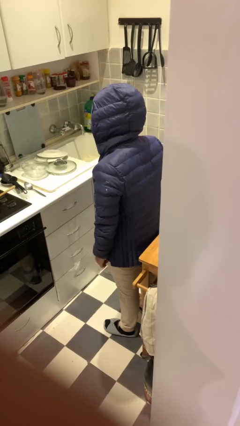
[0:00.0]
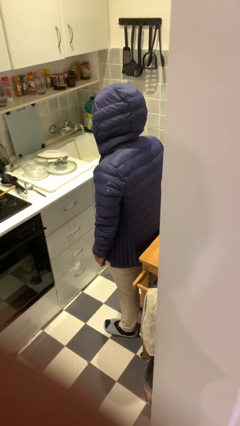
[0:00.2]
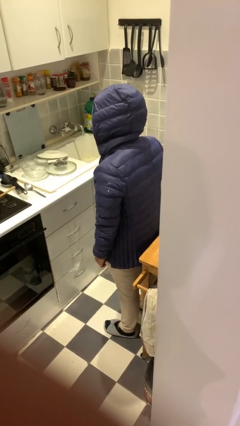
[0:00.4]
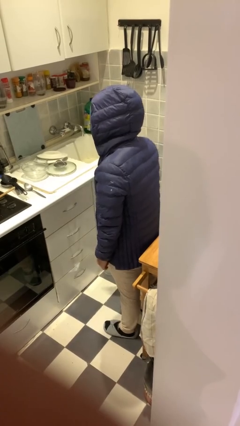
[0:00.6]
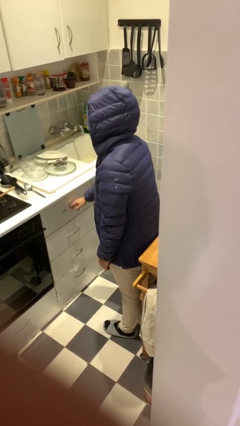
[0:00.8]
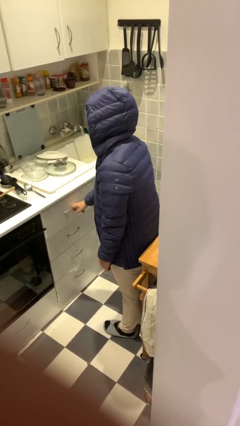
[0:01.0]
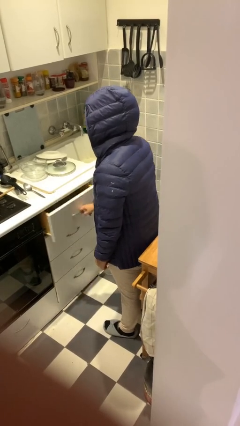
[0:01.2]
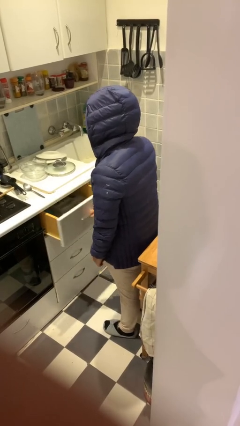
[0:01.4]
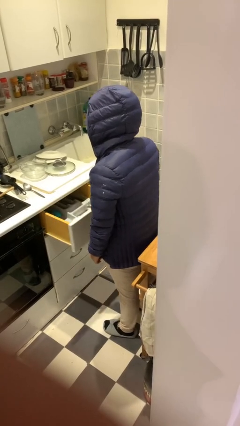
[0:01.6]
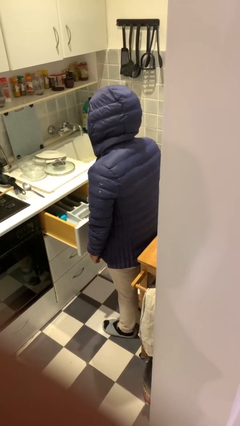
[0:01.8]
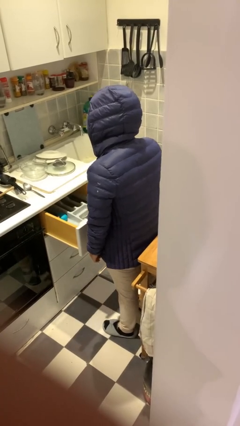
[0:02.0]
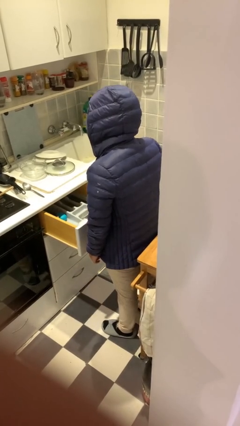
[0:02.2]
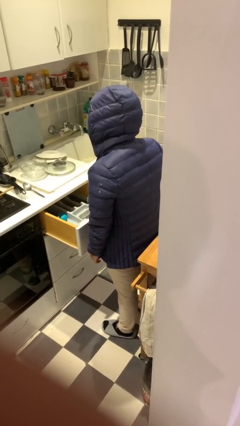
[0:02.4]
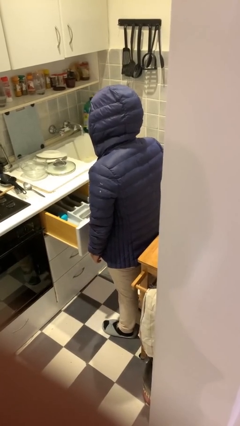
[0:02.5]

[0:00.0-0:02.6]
person opens kitchen drawer

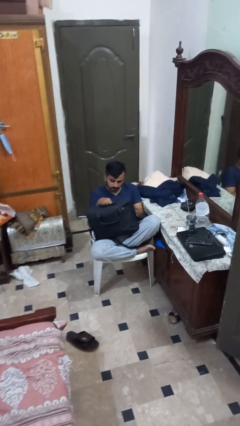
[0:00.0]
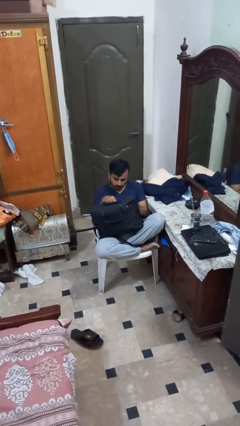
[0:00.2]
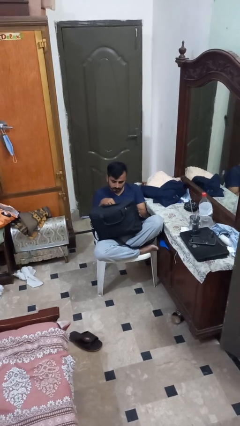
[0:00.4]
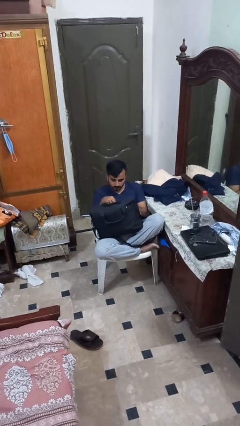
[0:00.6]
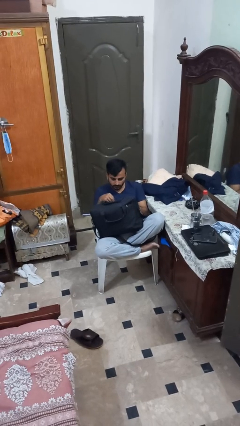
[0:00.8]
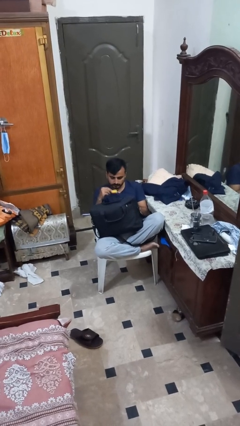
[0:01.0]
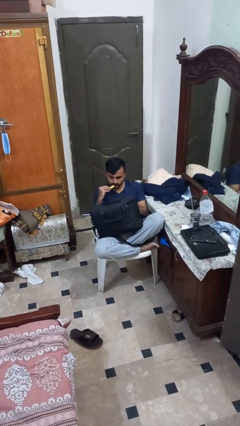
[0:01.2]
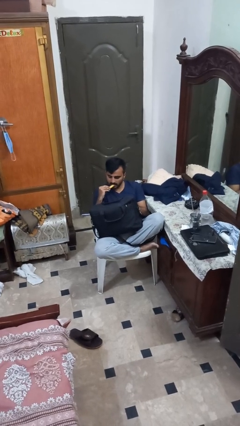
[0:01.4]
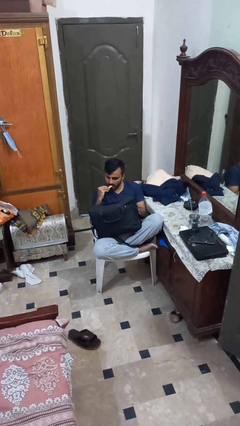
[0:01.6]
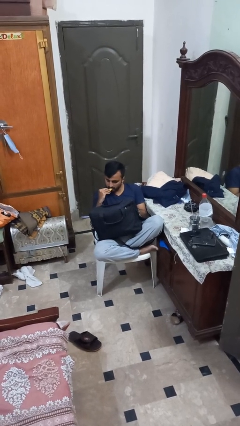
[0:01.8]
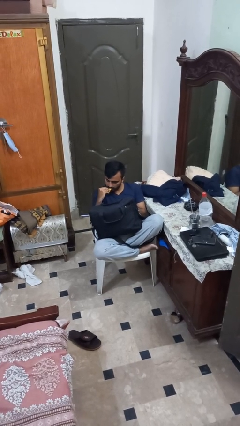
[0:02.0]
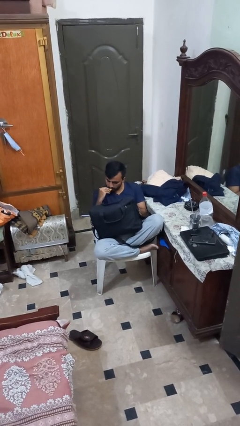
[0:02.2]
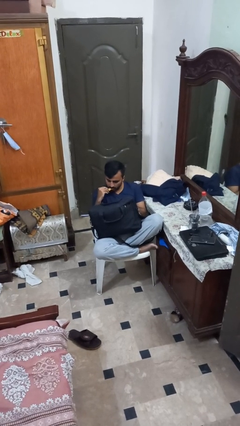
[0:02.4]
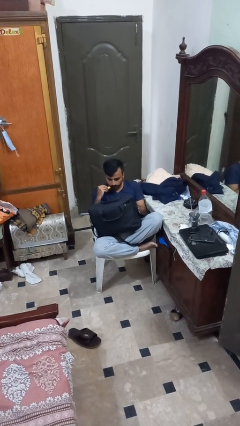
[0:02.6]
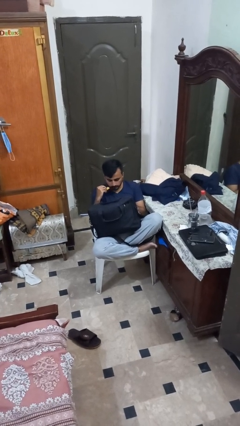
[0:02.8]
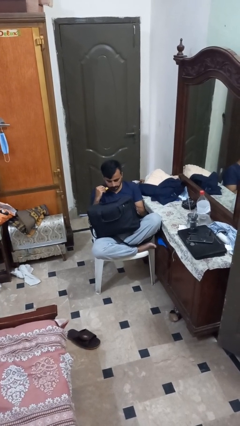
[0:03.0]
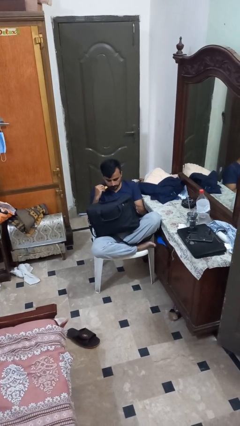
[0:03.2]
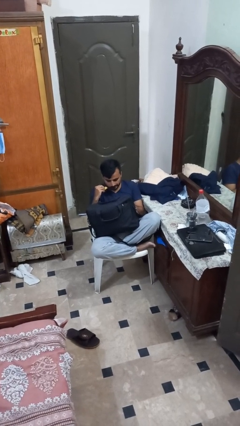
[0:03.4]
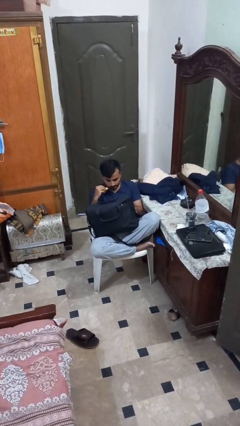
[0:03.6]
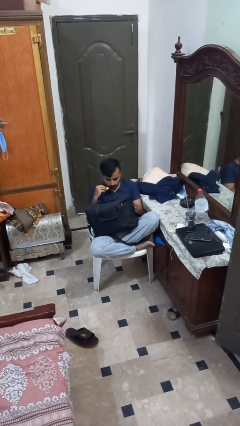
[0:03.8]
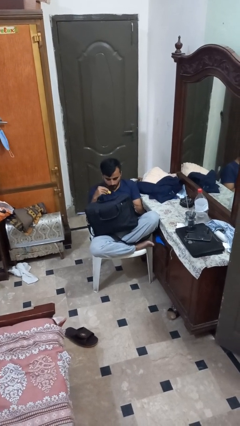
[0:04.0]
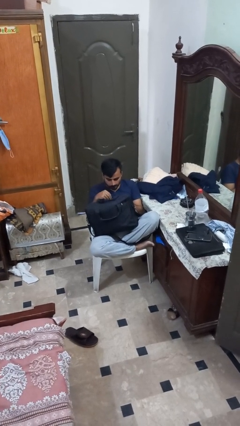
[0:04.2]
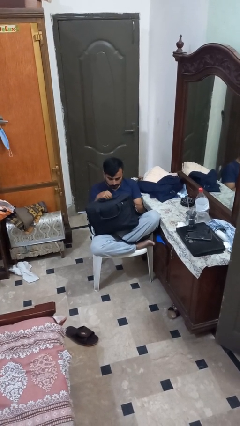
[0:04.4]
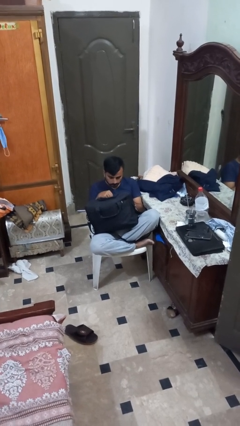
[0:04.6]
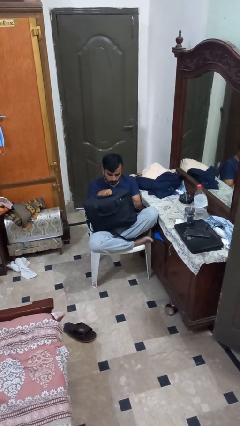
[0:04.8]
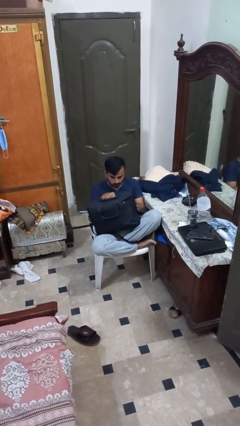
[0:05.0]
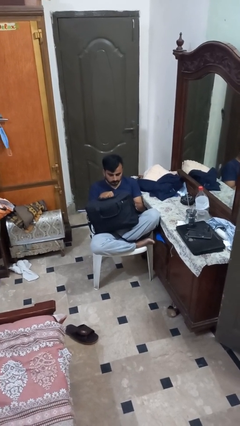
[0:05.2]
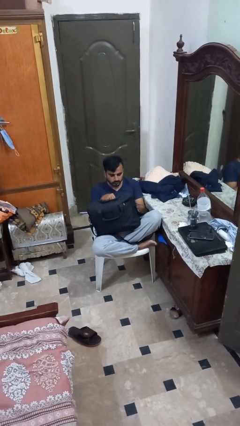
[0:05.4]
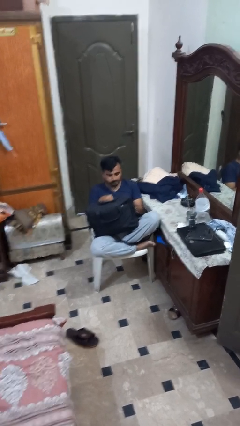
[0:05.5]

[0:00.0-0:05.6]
person eats snack from bag

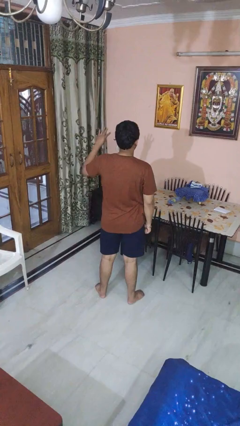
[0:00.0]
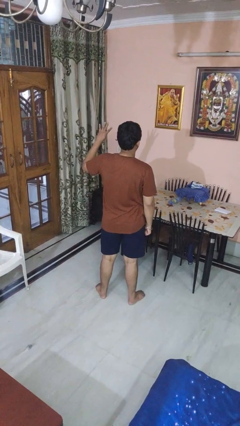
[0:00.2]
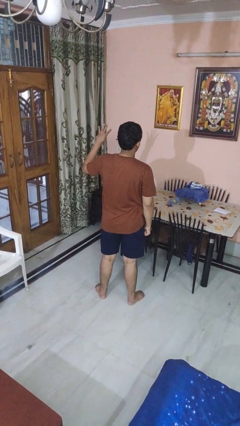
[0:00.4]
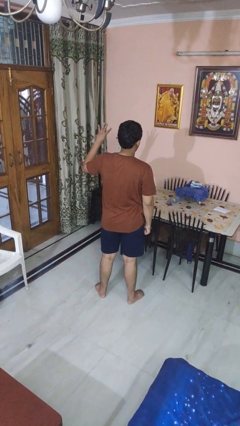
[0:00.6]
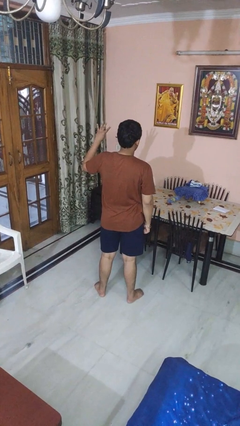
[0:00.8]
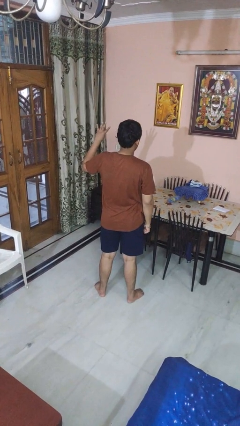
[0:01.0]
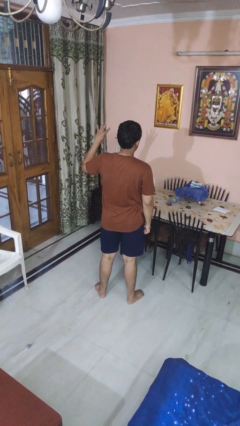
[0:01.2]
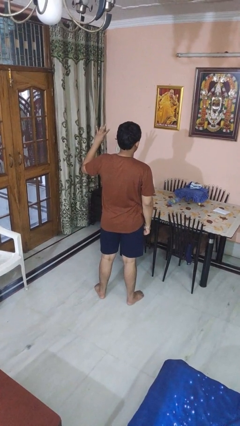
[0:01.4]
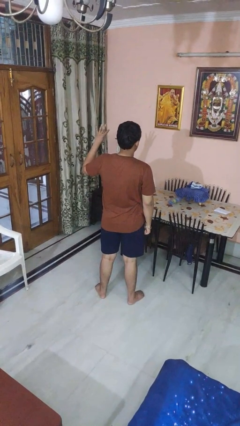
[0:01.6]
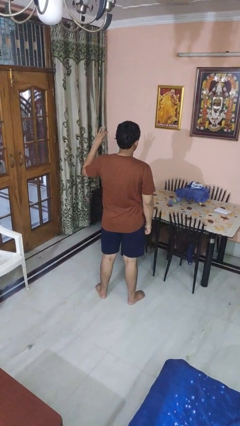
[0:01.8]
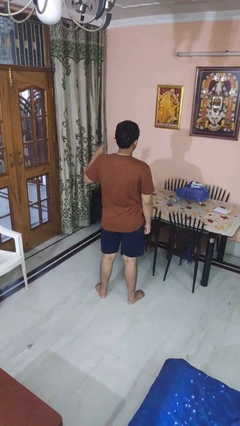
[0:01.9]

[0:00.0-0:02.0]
person gestures number four

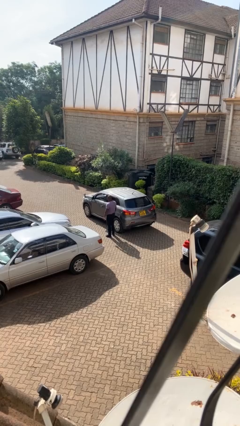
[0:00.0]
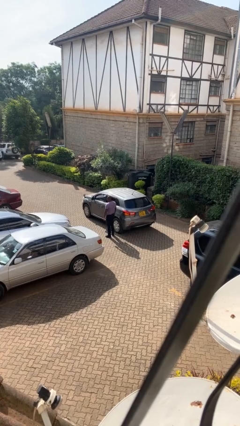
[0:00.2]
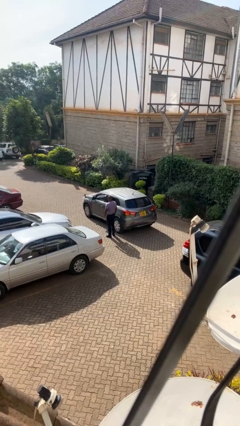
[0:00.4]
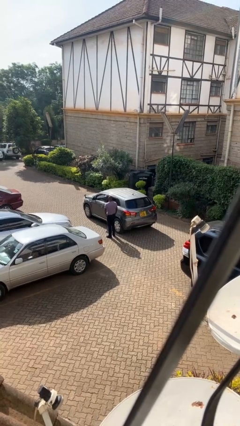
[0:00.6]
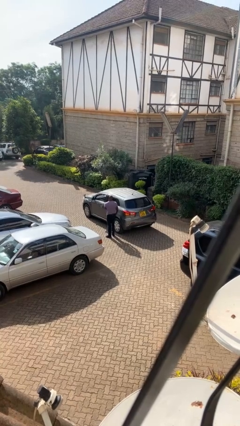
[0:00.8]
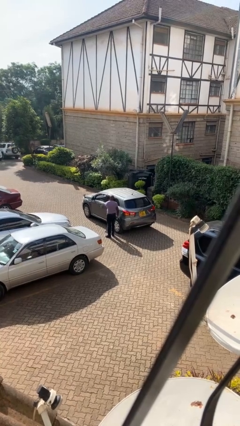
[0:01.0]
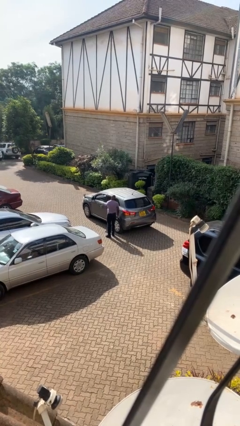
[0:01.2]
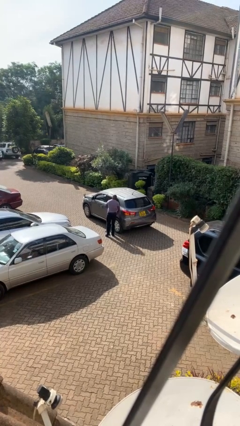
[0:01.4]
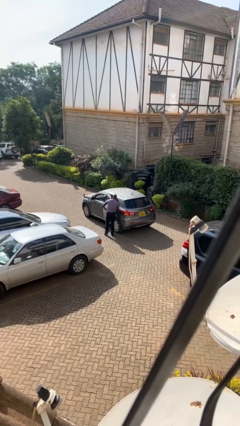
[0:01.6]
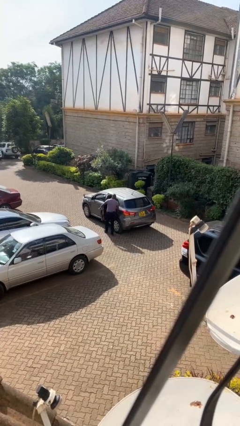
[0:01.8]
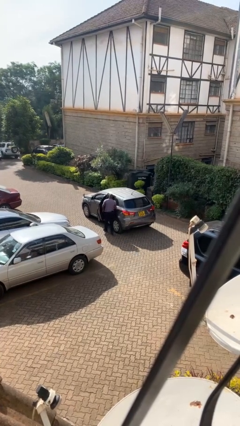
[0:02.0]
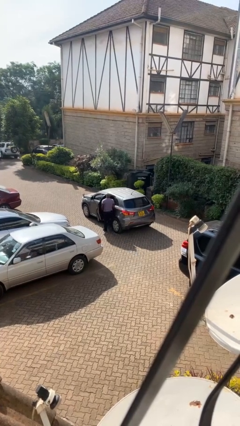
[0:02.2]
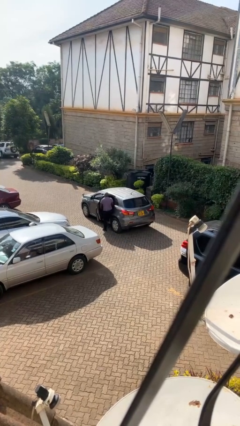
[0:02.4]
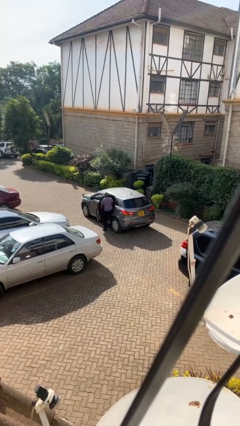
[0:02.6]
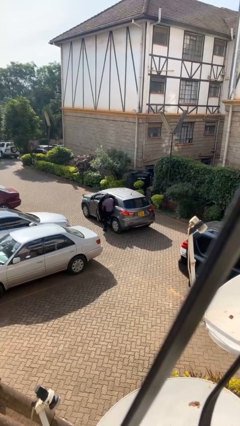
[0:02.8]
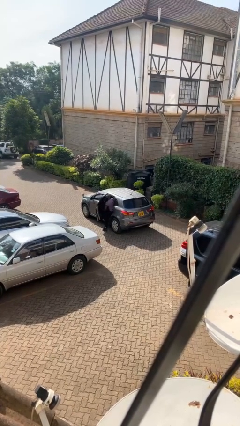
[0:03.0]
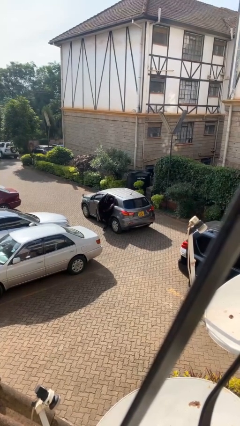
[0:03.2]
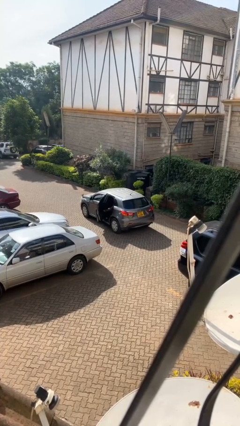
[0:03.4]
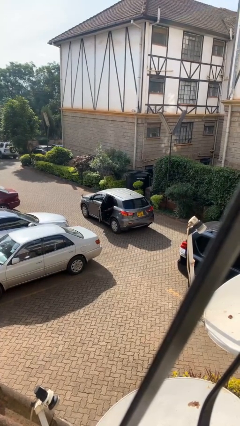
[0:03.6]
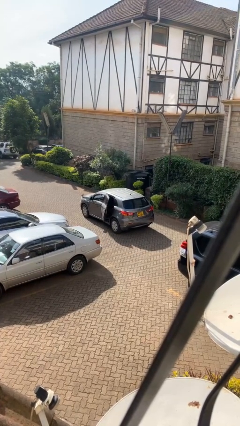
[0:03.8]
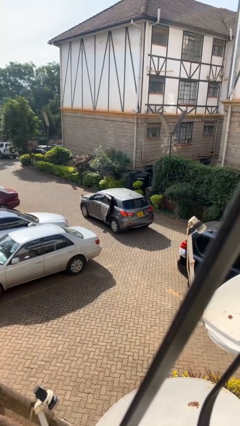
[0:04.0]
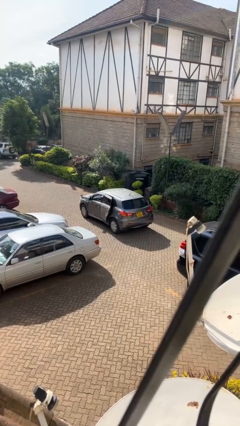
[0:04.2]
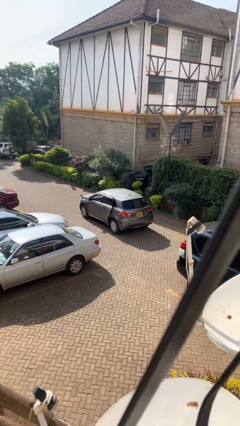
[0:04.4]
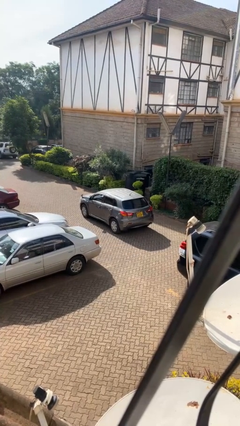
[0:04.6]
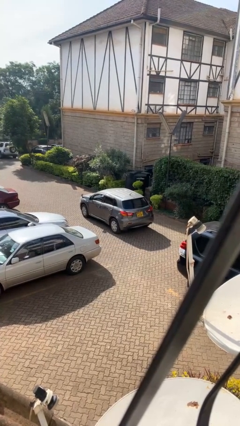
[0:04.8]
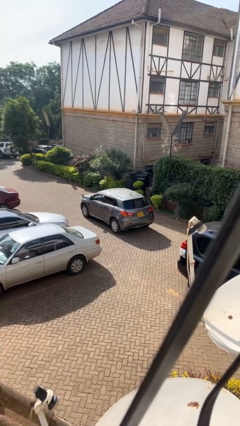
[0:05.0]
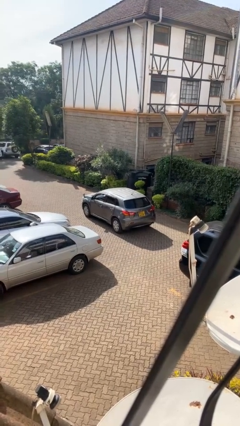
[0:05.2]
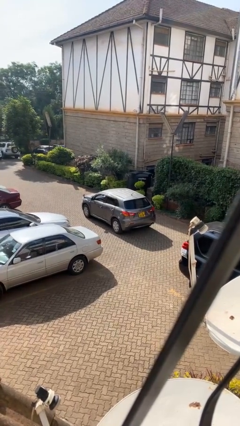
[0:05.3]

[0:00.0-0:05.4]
car picks up person

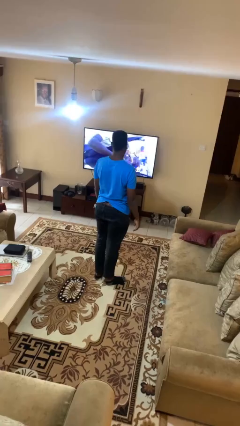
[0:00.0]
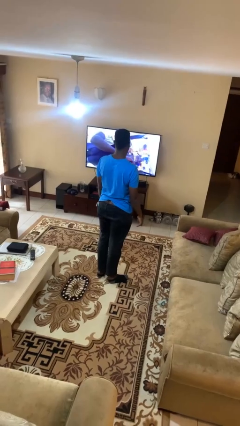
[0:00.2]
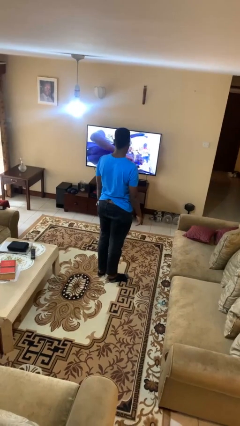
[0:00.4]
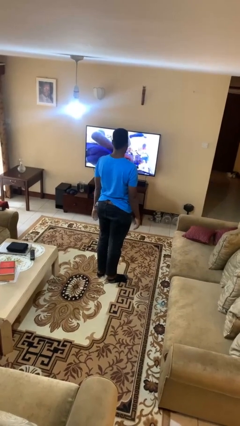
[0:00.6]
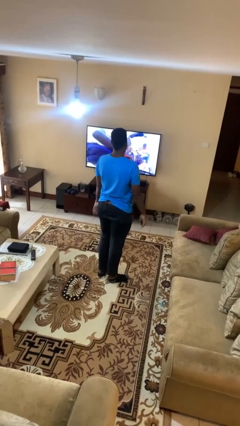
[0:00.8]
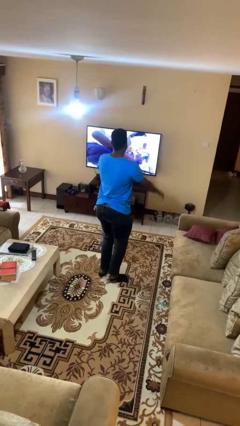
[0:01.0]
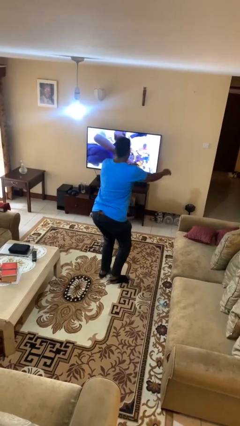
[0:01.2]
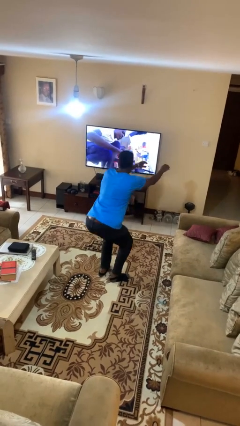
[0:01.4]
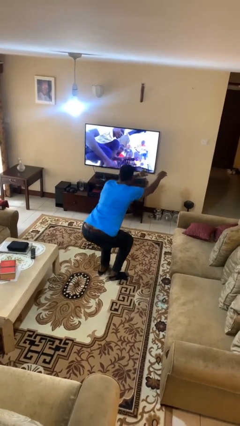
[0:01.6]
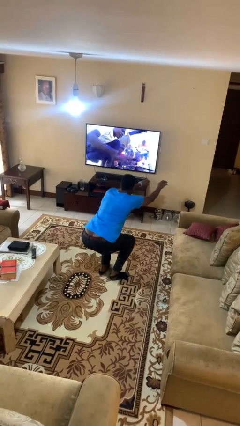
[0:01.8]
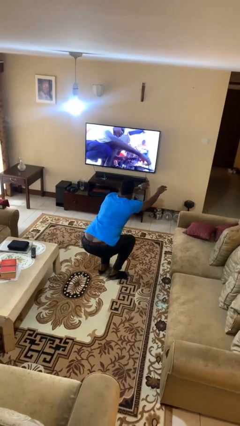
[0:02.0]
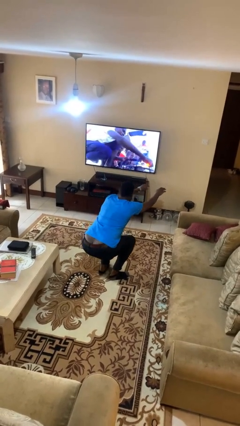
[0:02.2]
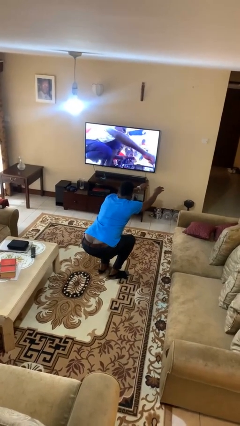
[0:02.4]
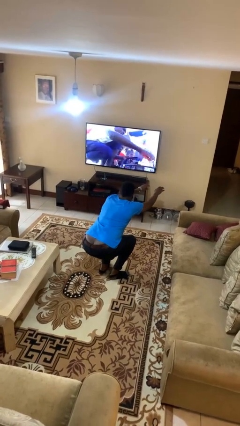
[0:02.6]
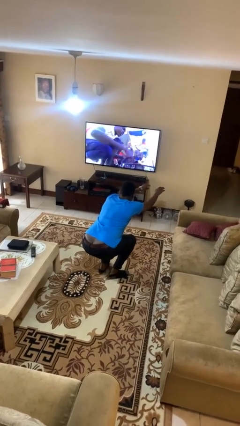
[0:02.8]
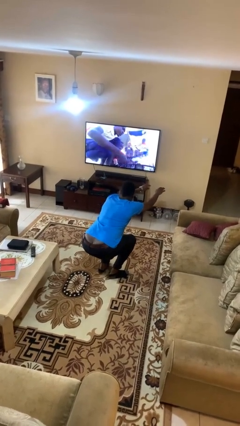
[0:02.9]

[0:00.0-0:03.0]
person squats
